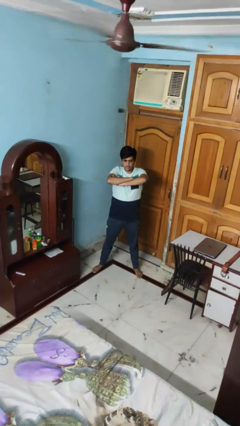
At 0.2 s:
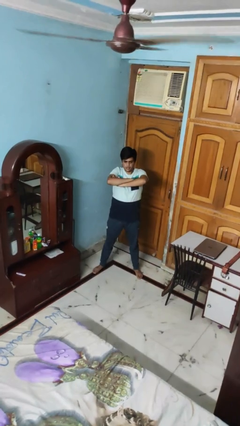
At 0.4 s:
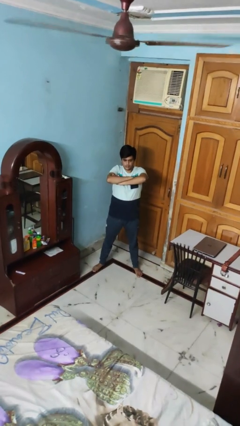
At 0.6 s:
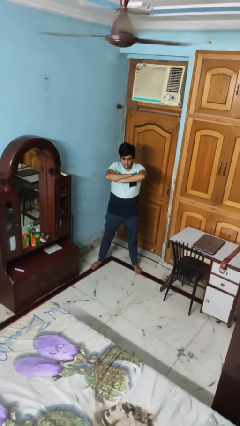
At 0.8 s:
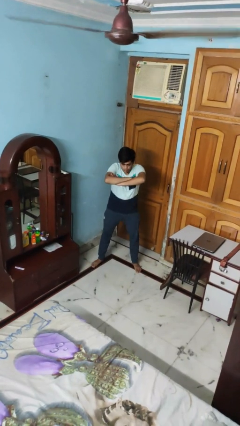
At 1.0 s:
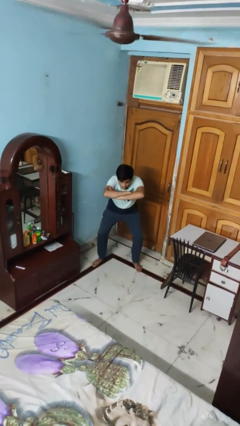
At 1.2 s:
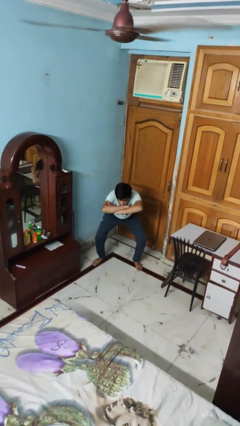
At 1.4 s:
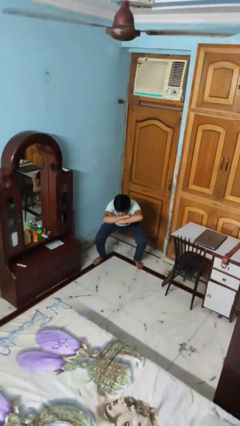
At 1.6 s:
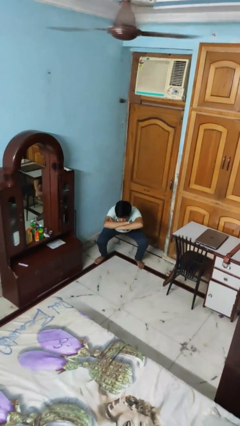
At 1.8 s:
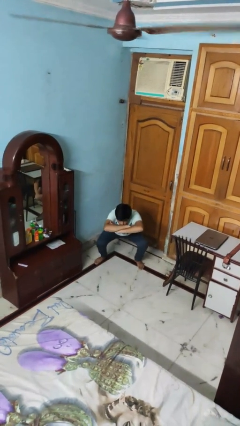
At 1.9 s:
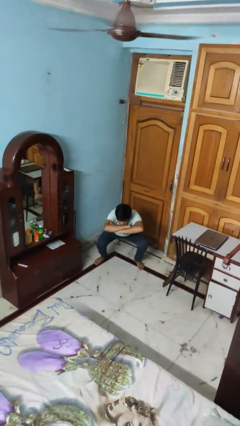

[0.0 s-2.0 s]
person squats

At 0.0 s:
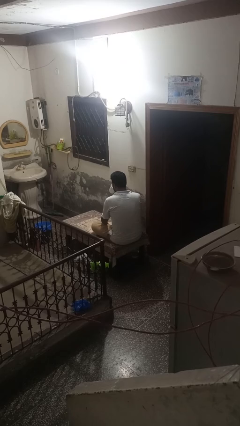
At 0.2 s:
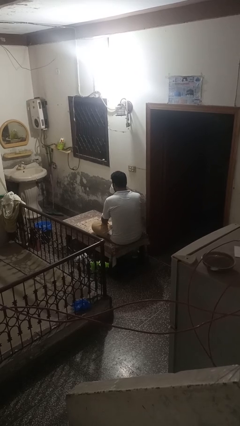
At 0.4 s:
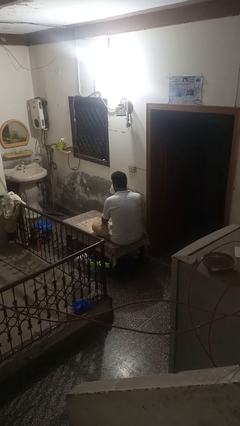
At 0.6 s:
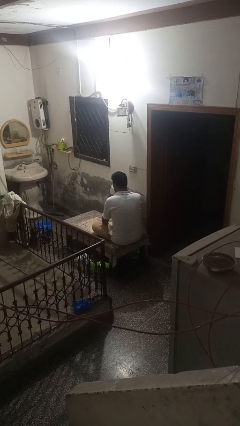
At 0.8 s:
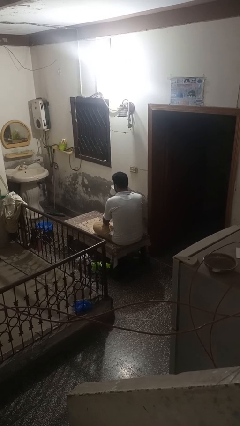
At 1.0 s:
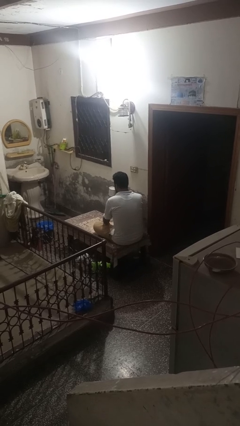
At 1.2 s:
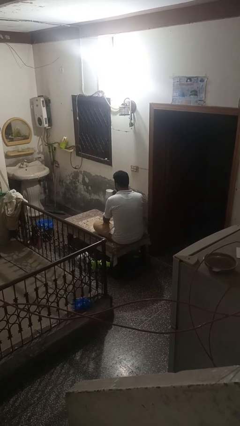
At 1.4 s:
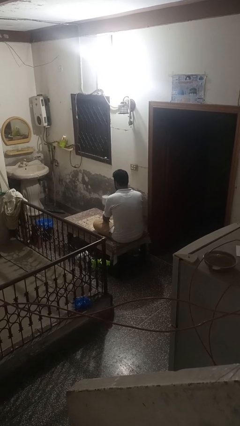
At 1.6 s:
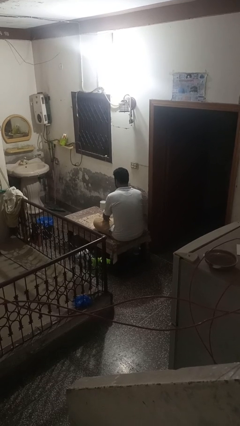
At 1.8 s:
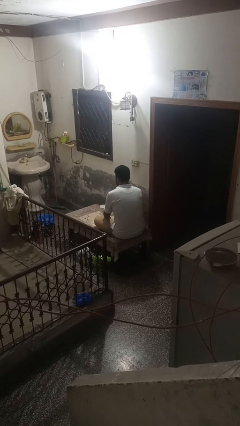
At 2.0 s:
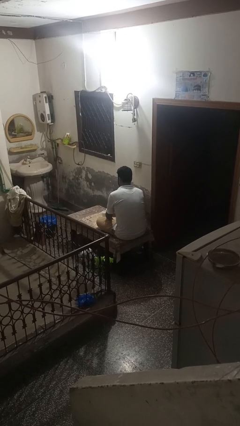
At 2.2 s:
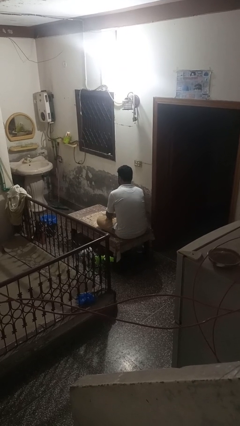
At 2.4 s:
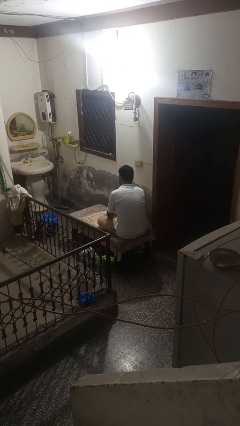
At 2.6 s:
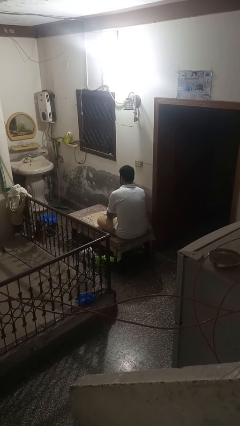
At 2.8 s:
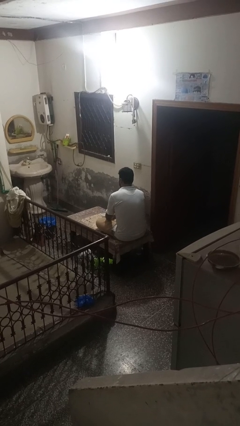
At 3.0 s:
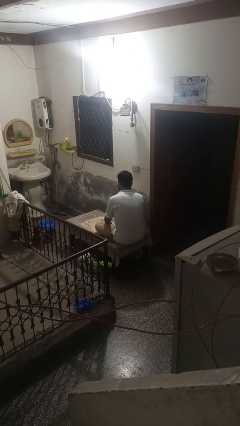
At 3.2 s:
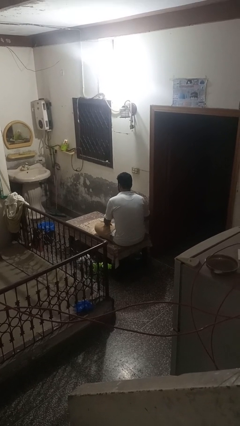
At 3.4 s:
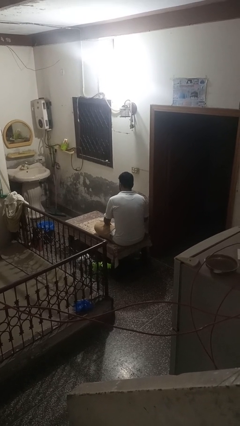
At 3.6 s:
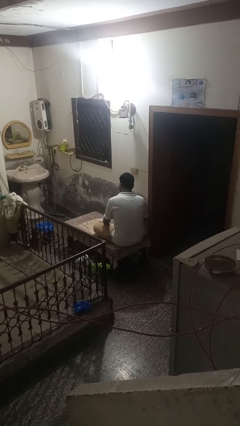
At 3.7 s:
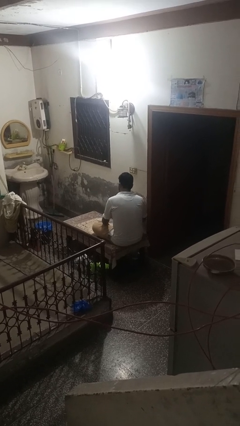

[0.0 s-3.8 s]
person puts down object on table

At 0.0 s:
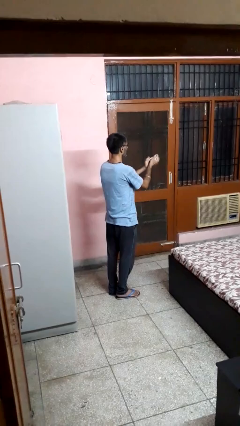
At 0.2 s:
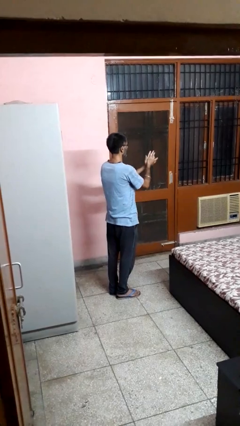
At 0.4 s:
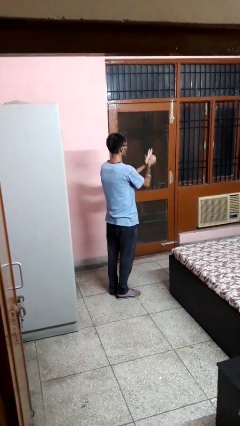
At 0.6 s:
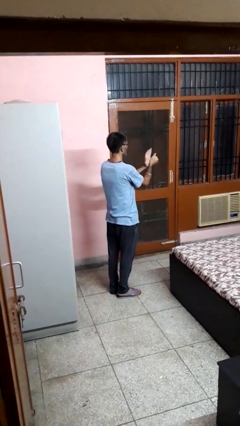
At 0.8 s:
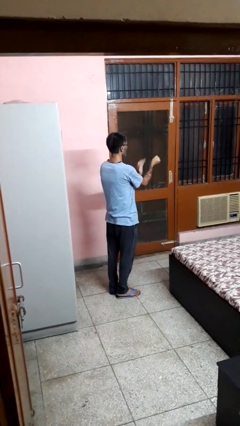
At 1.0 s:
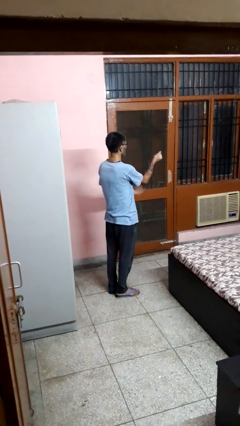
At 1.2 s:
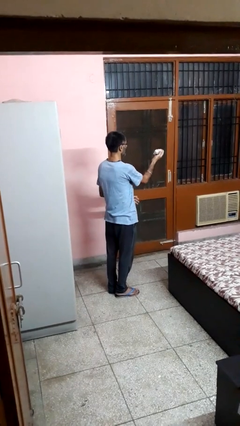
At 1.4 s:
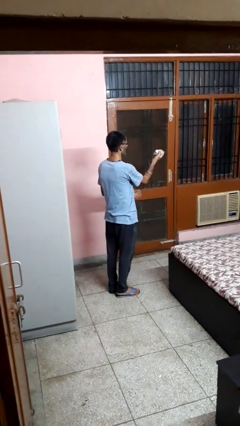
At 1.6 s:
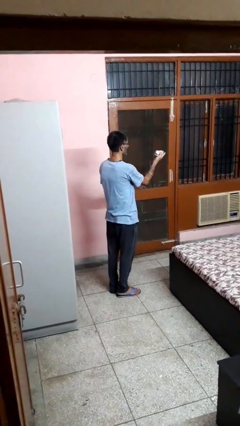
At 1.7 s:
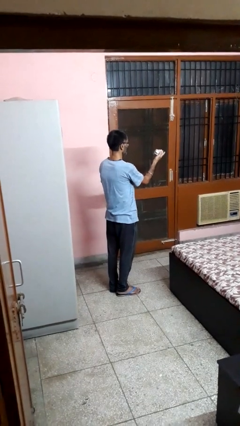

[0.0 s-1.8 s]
person crumples paper

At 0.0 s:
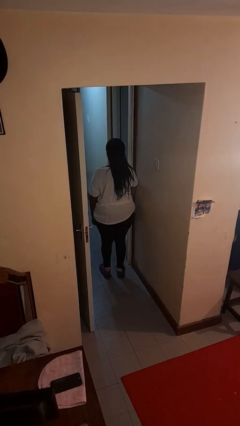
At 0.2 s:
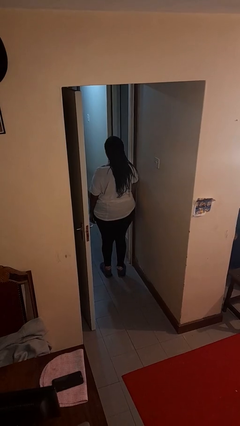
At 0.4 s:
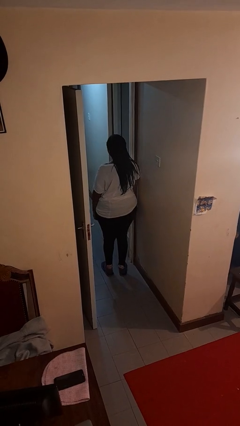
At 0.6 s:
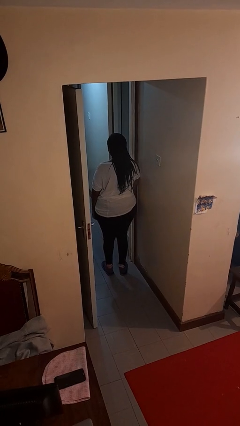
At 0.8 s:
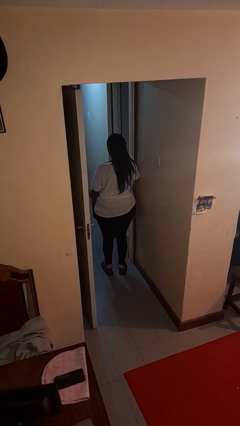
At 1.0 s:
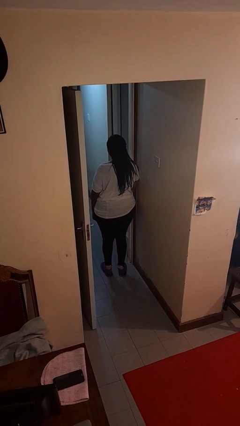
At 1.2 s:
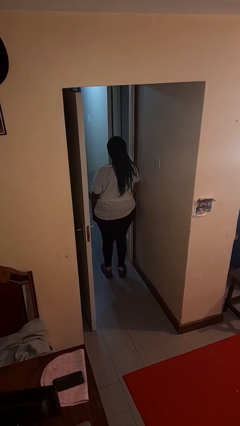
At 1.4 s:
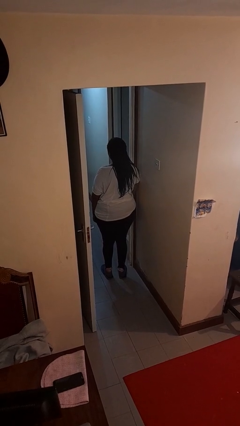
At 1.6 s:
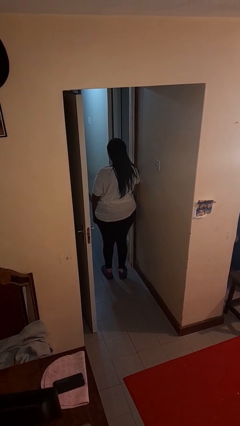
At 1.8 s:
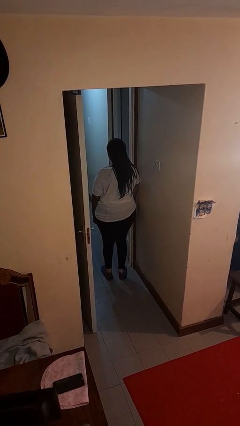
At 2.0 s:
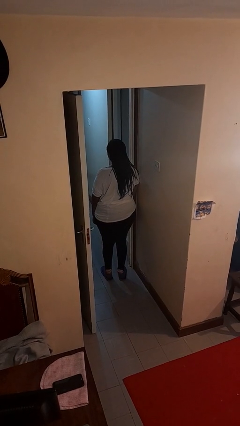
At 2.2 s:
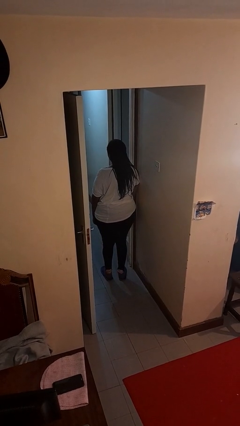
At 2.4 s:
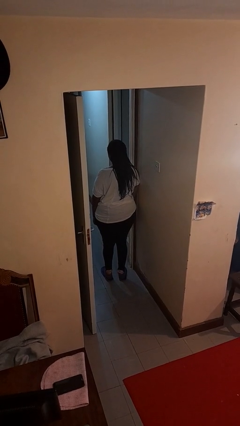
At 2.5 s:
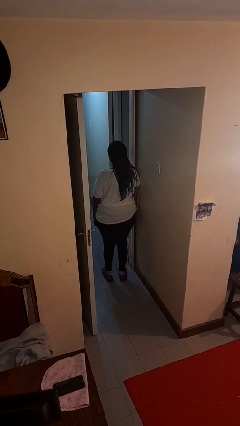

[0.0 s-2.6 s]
person bumps into wall

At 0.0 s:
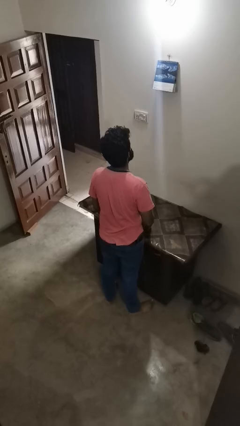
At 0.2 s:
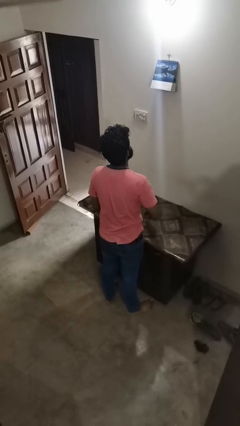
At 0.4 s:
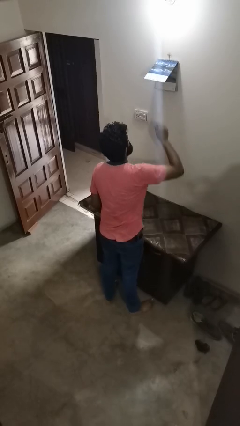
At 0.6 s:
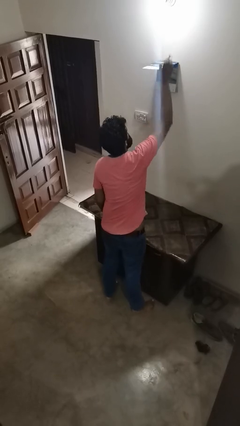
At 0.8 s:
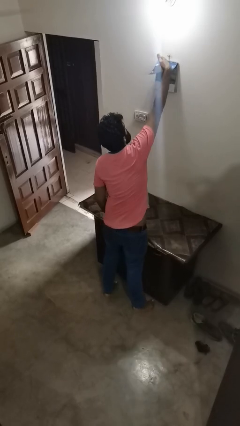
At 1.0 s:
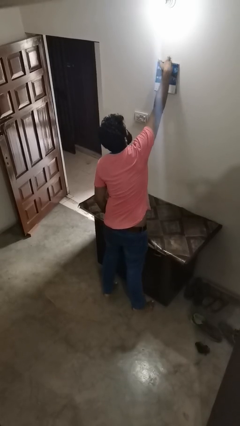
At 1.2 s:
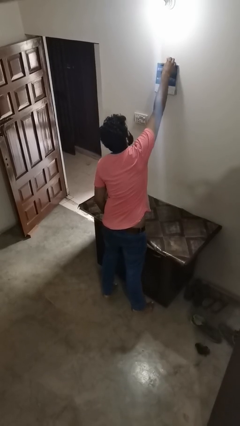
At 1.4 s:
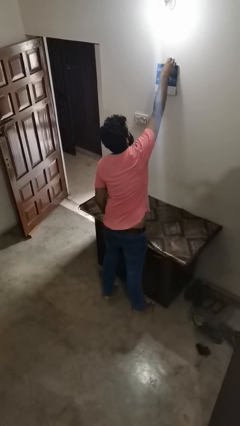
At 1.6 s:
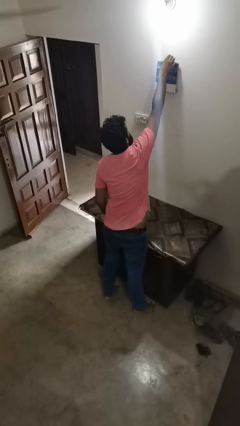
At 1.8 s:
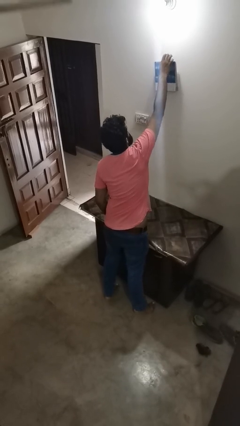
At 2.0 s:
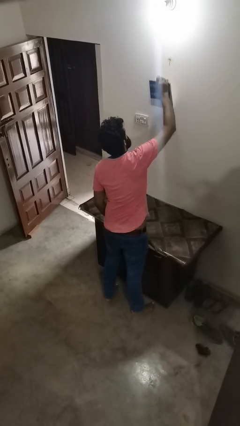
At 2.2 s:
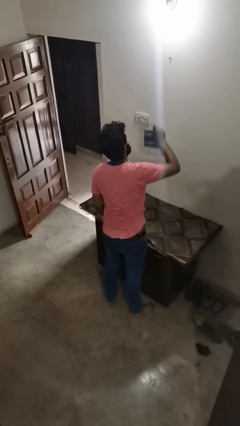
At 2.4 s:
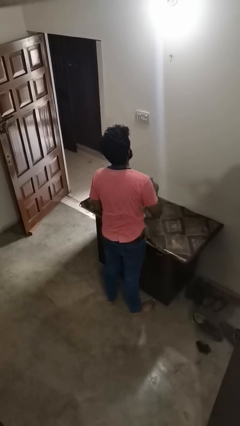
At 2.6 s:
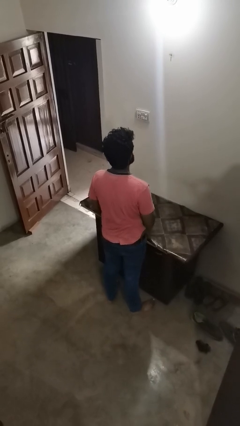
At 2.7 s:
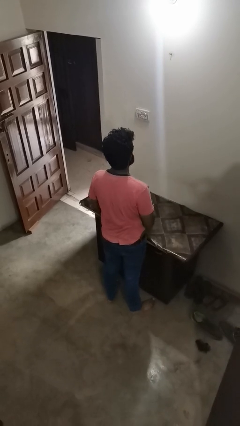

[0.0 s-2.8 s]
person takes down picture frame

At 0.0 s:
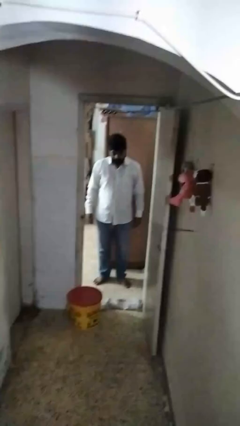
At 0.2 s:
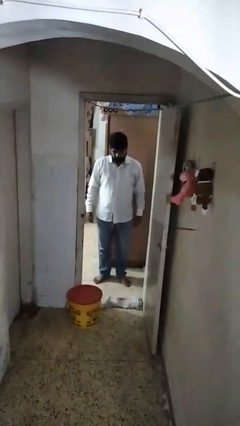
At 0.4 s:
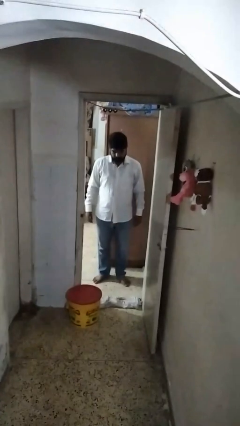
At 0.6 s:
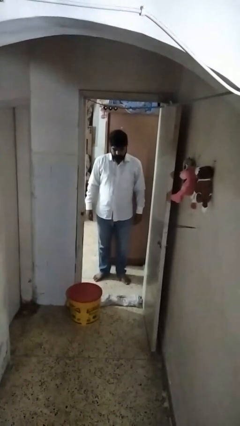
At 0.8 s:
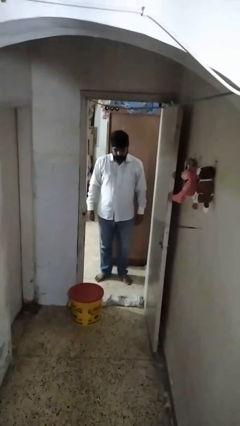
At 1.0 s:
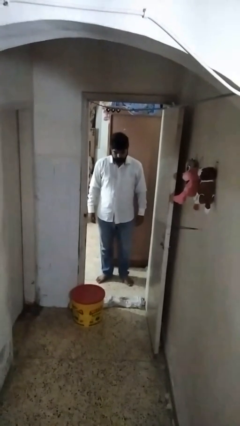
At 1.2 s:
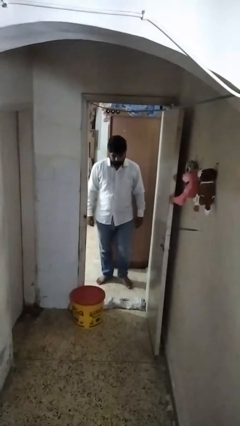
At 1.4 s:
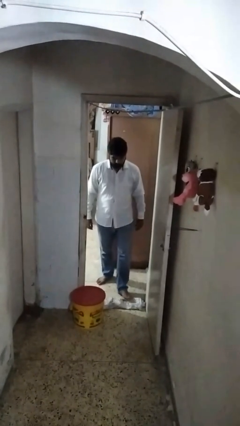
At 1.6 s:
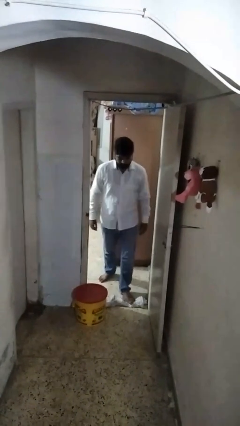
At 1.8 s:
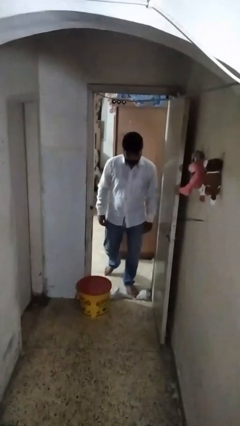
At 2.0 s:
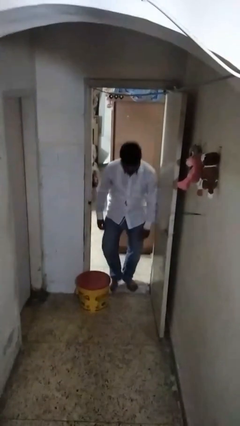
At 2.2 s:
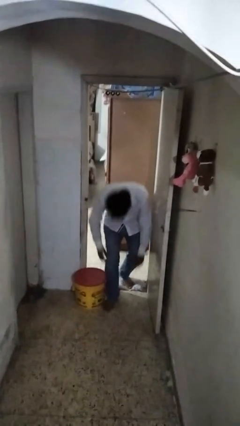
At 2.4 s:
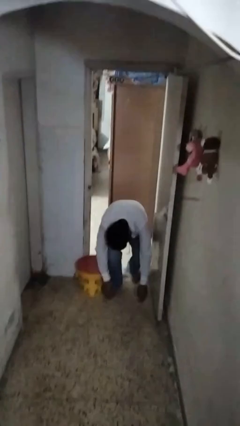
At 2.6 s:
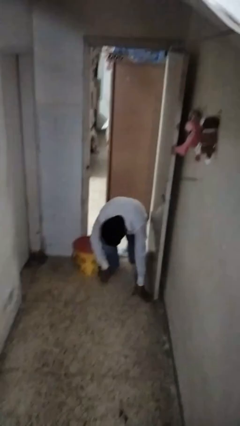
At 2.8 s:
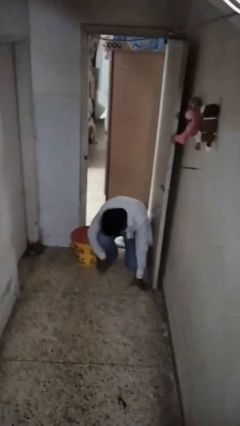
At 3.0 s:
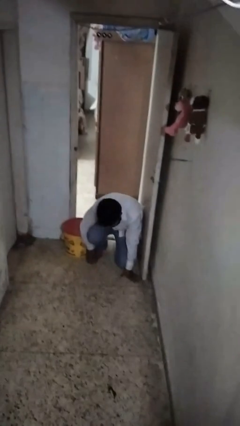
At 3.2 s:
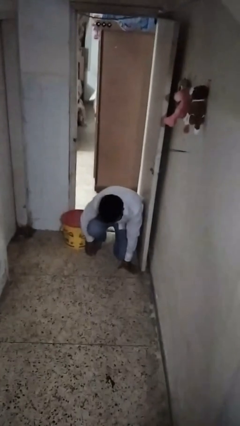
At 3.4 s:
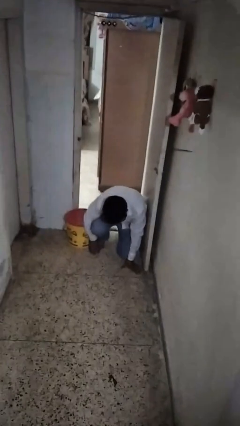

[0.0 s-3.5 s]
person trips on object on floor

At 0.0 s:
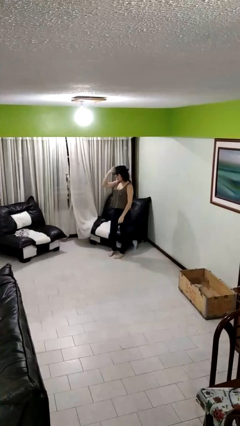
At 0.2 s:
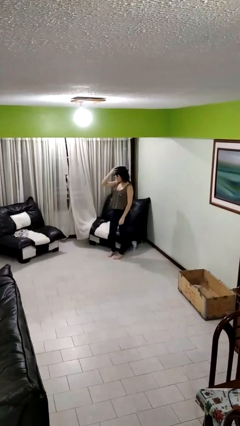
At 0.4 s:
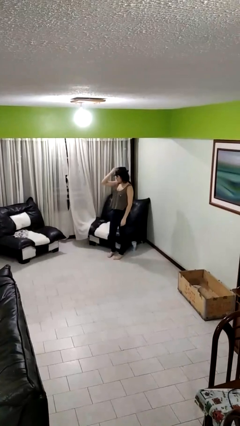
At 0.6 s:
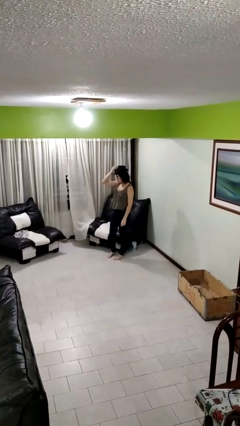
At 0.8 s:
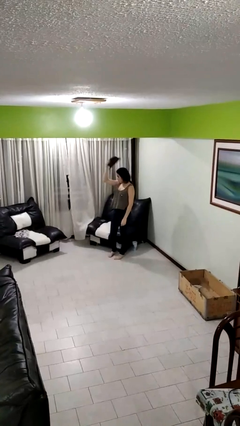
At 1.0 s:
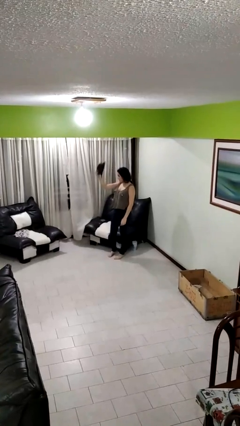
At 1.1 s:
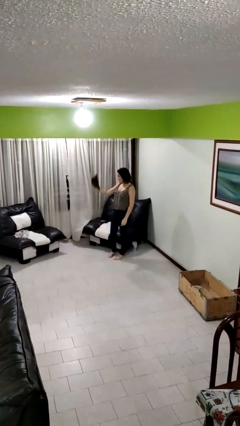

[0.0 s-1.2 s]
person takes off hat
